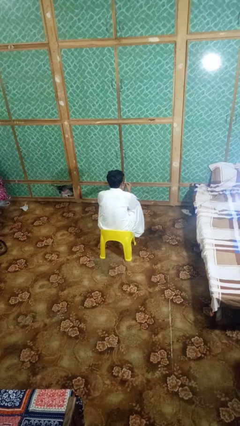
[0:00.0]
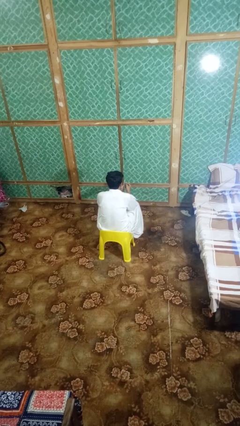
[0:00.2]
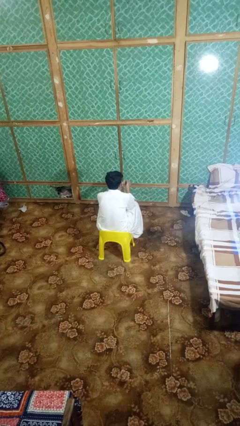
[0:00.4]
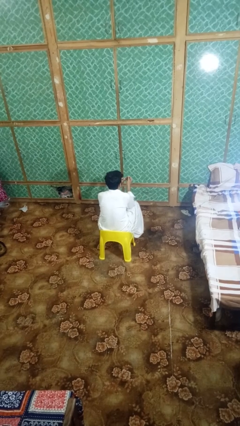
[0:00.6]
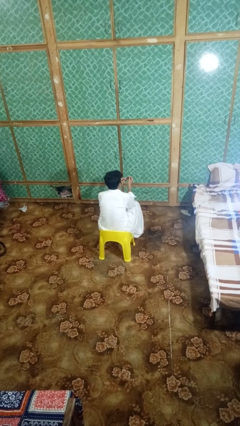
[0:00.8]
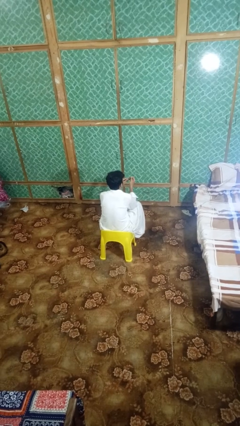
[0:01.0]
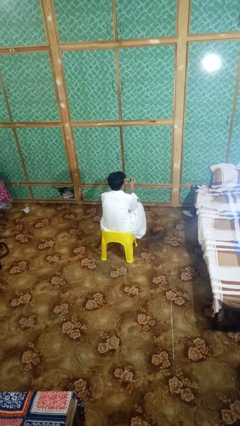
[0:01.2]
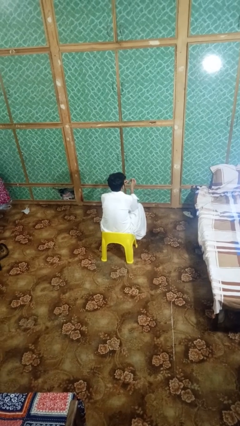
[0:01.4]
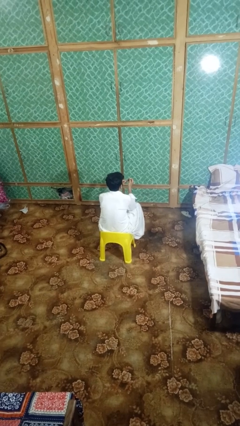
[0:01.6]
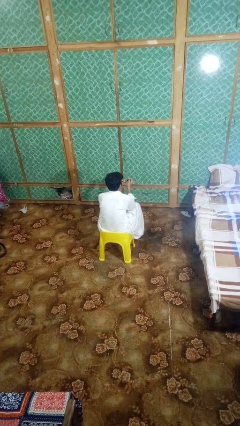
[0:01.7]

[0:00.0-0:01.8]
person files fingernails

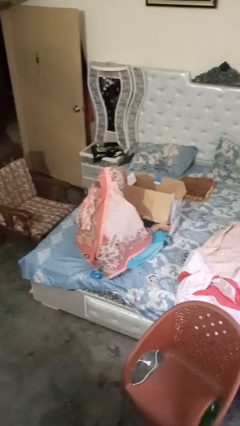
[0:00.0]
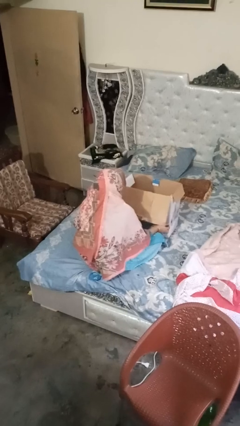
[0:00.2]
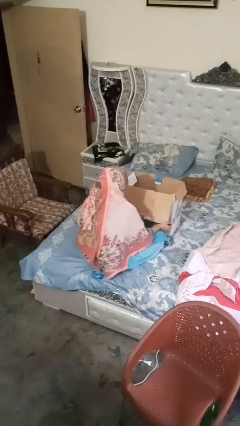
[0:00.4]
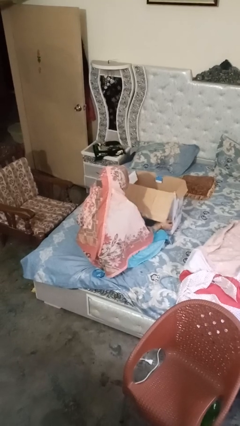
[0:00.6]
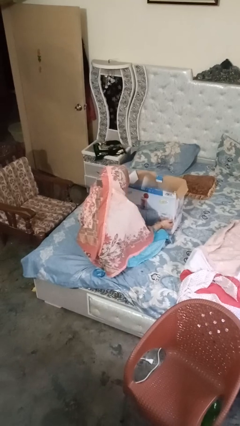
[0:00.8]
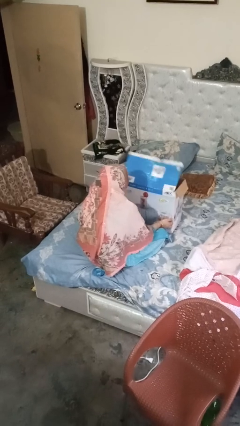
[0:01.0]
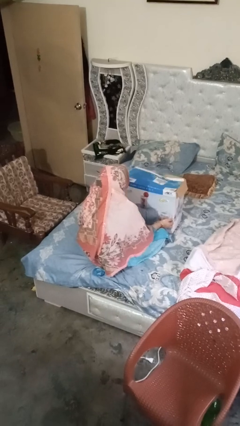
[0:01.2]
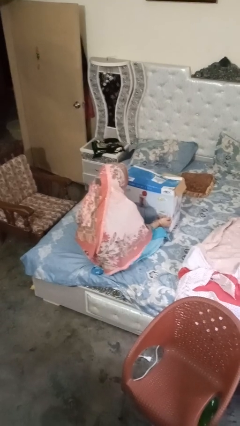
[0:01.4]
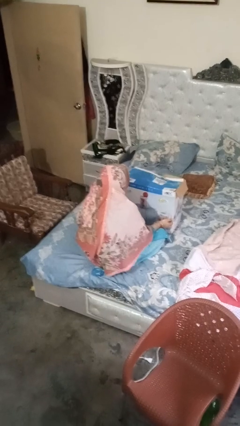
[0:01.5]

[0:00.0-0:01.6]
person closes box

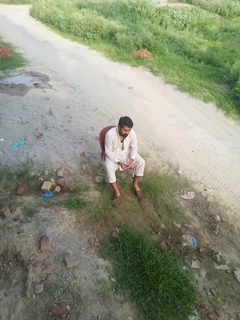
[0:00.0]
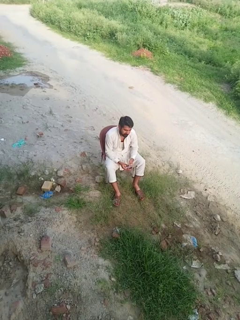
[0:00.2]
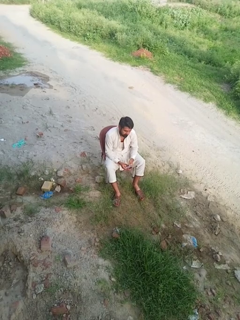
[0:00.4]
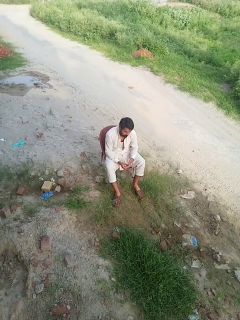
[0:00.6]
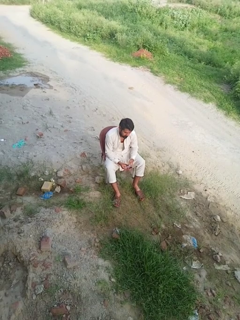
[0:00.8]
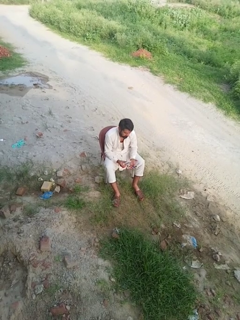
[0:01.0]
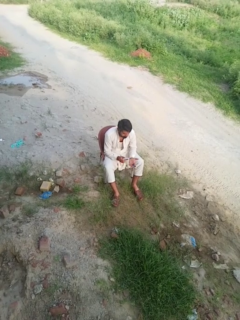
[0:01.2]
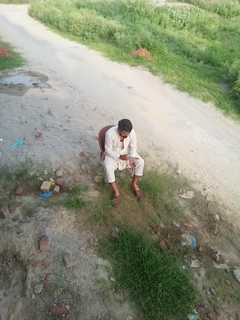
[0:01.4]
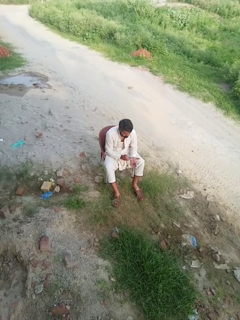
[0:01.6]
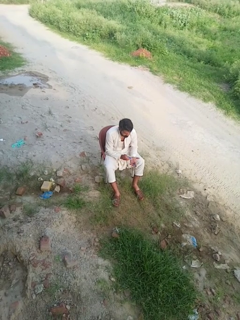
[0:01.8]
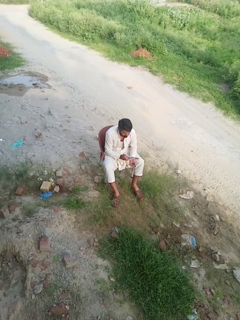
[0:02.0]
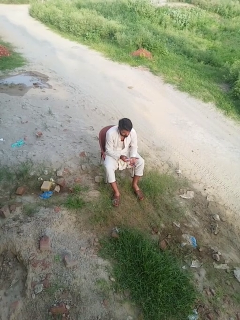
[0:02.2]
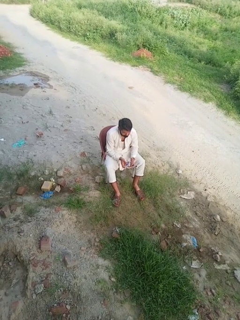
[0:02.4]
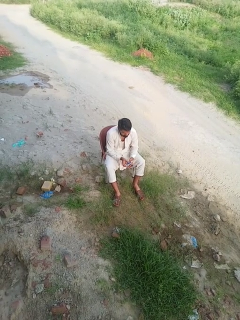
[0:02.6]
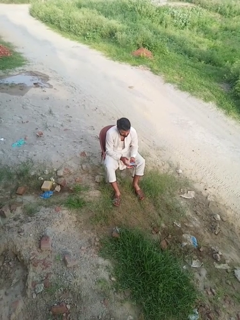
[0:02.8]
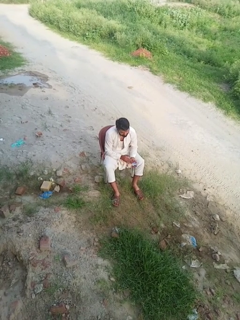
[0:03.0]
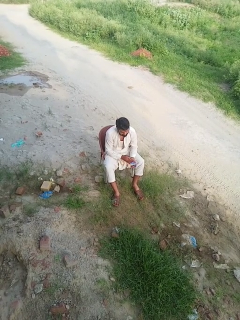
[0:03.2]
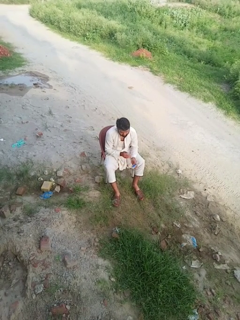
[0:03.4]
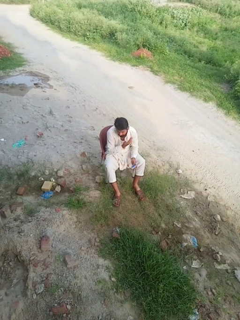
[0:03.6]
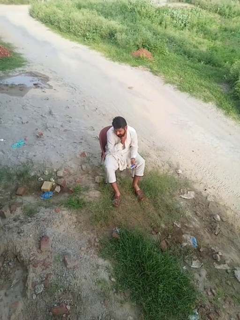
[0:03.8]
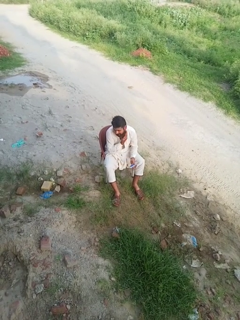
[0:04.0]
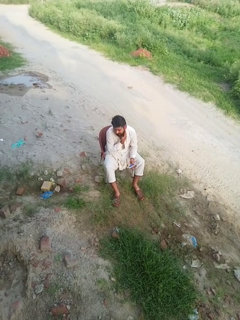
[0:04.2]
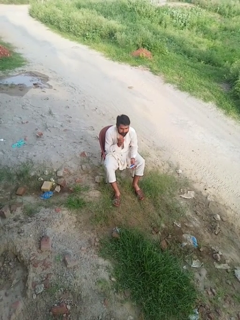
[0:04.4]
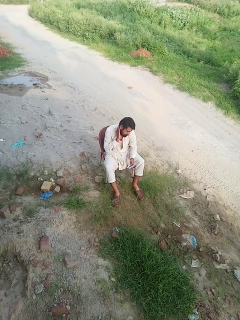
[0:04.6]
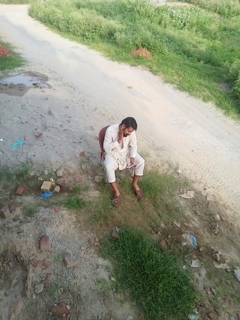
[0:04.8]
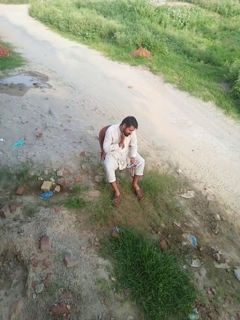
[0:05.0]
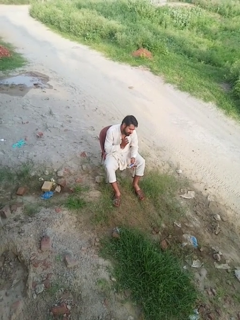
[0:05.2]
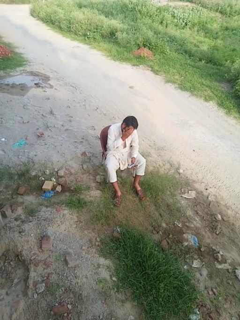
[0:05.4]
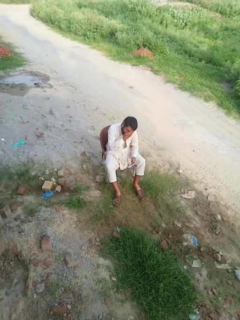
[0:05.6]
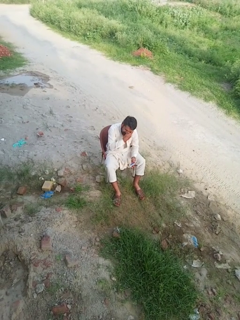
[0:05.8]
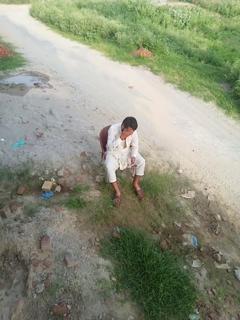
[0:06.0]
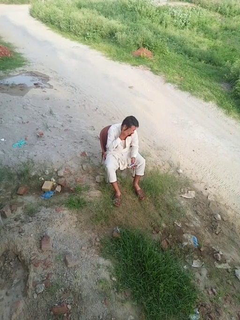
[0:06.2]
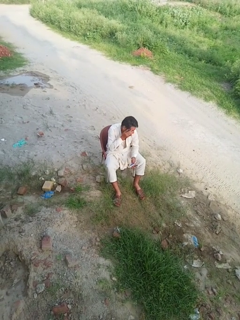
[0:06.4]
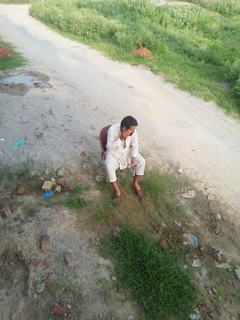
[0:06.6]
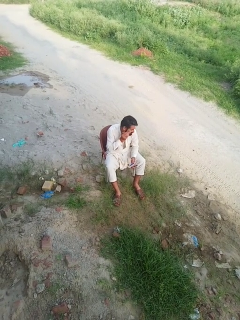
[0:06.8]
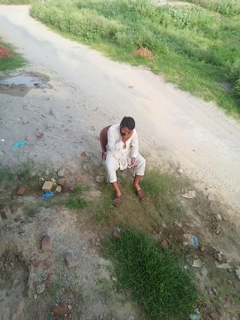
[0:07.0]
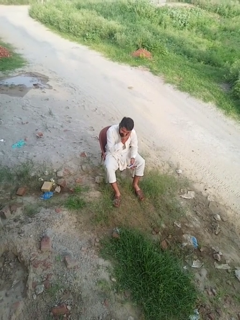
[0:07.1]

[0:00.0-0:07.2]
person applies facial moisturizer

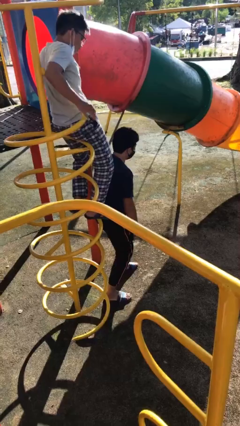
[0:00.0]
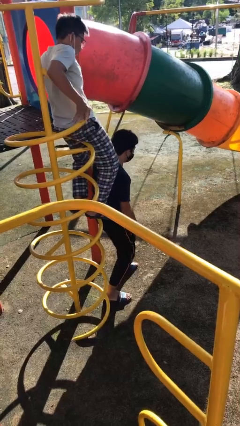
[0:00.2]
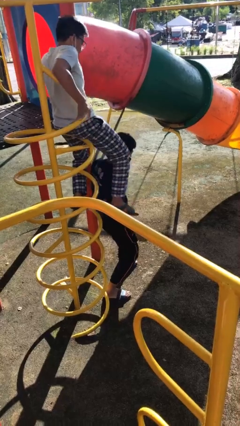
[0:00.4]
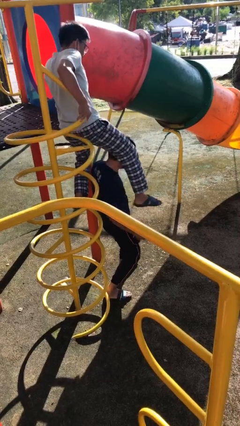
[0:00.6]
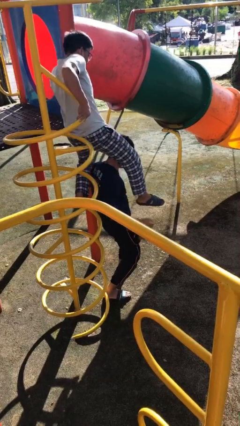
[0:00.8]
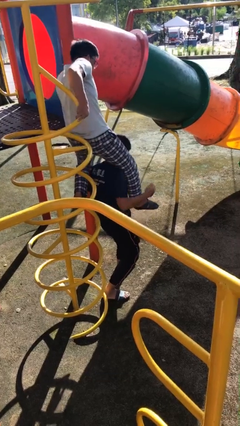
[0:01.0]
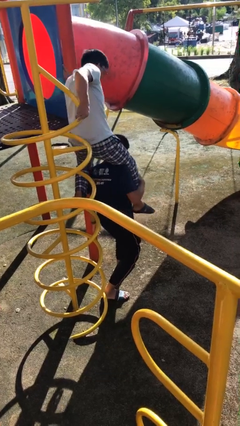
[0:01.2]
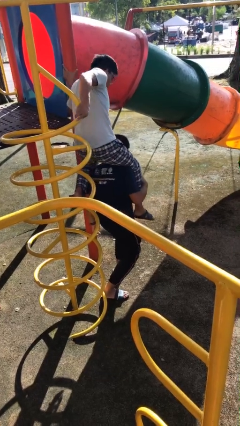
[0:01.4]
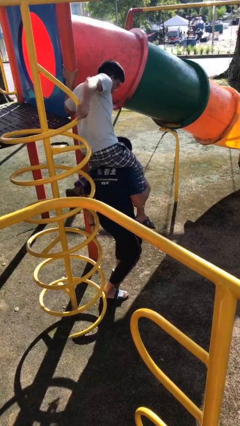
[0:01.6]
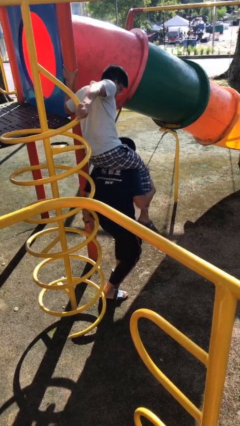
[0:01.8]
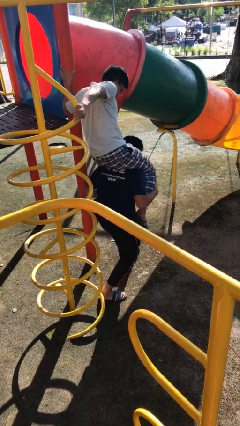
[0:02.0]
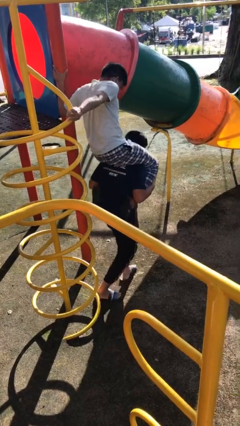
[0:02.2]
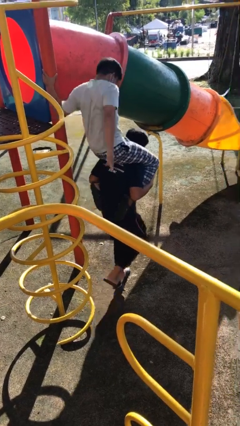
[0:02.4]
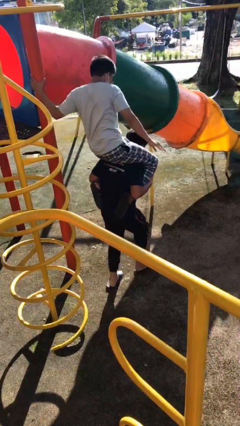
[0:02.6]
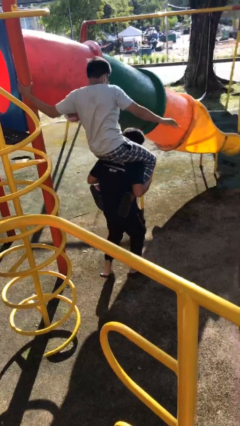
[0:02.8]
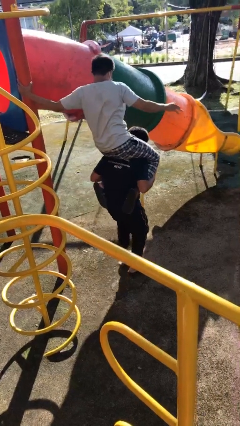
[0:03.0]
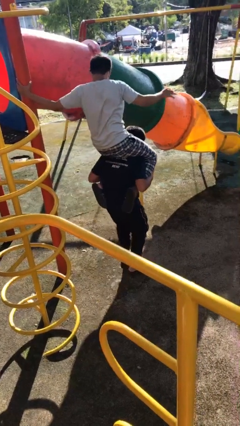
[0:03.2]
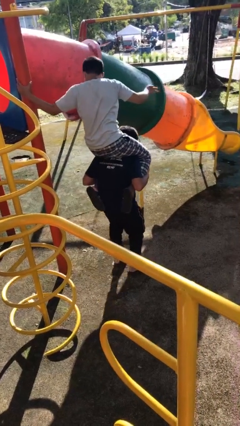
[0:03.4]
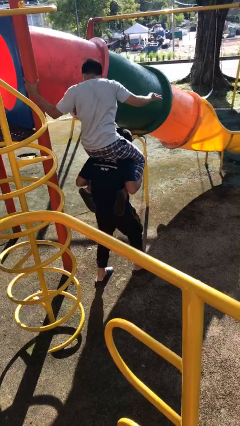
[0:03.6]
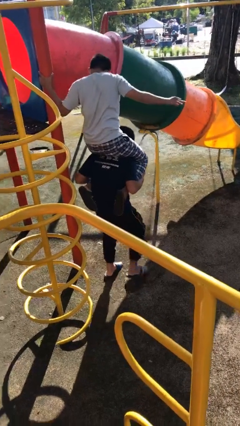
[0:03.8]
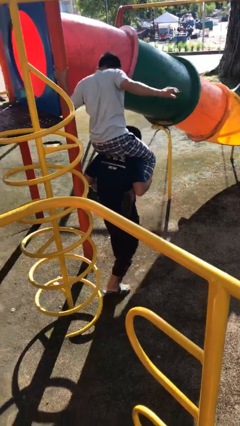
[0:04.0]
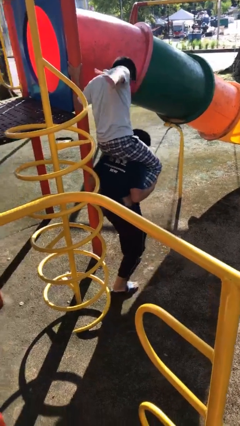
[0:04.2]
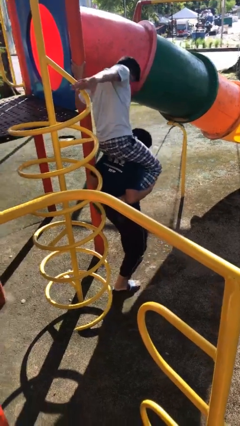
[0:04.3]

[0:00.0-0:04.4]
person carries person on shoulders

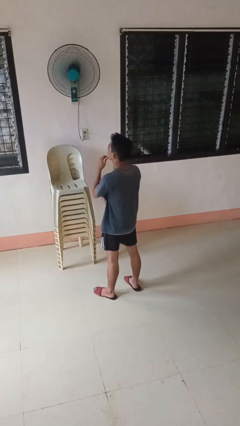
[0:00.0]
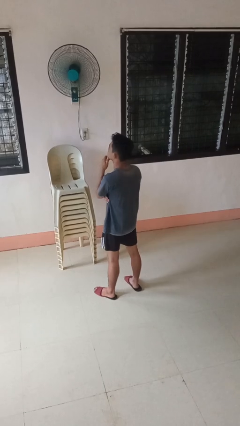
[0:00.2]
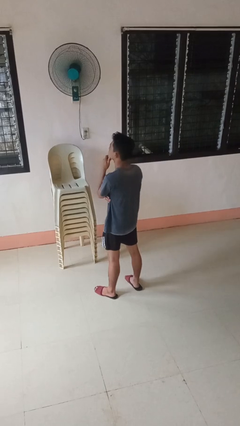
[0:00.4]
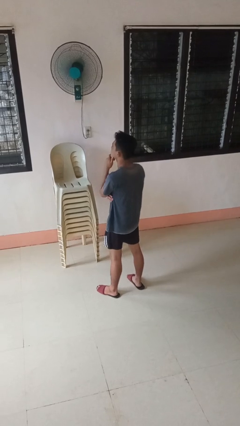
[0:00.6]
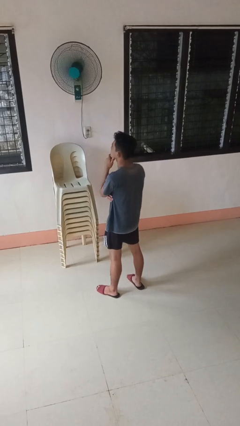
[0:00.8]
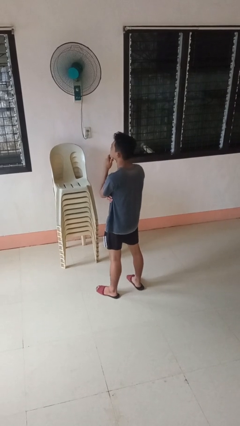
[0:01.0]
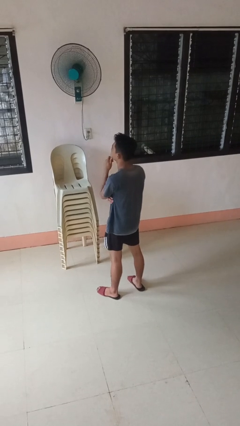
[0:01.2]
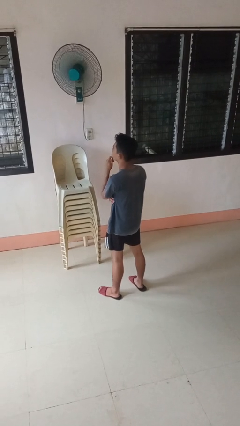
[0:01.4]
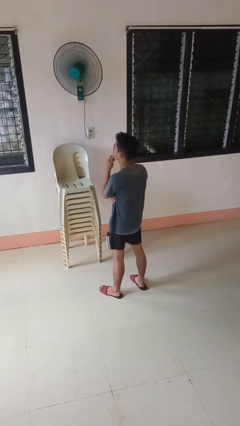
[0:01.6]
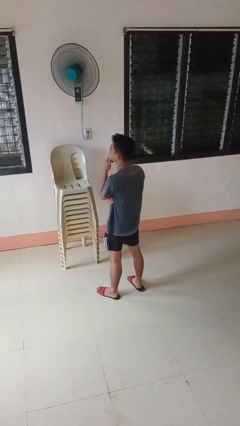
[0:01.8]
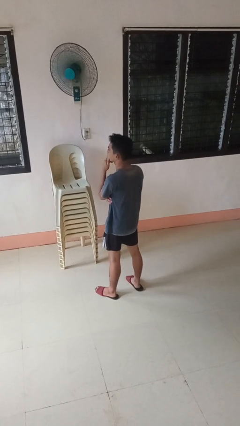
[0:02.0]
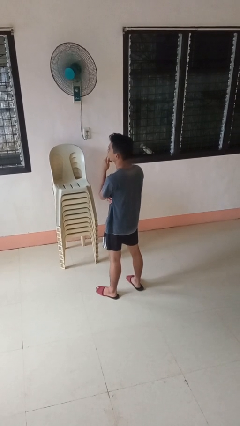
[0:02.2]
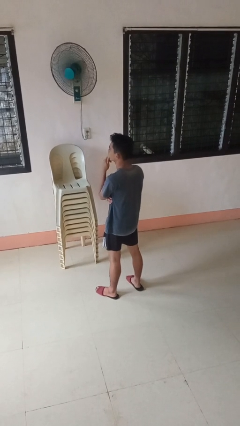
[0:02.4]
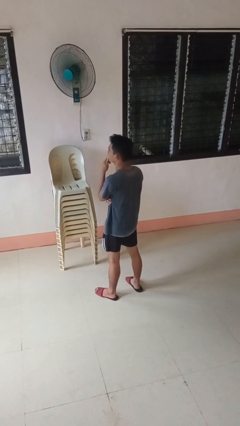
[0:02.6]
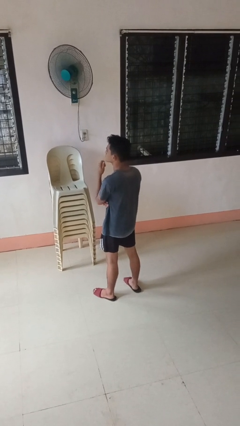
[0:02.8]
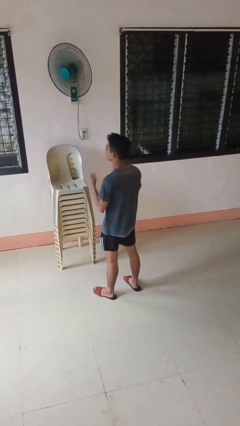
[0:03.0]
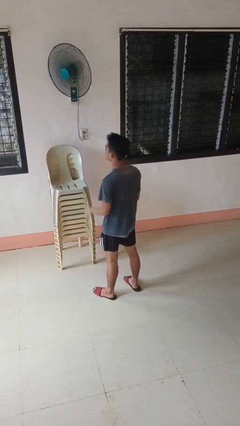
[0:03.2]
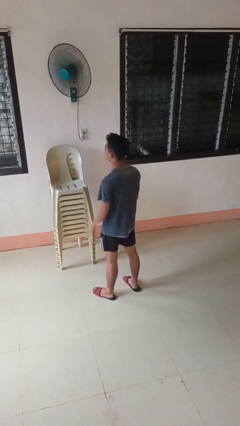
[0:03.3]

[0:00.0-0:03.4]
person strokes chin

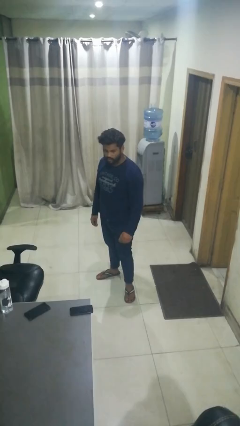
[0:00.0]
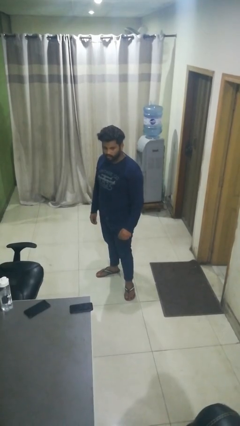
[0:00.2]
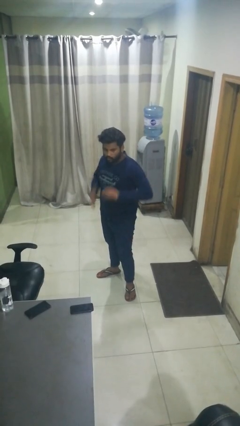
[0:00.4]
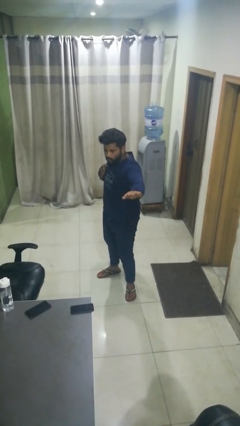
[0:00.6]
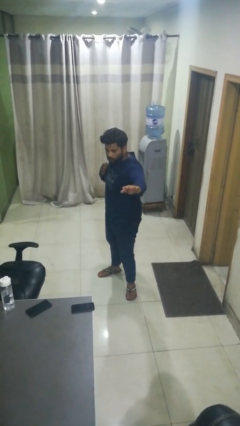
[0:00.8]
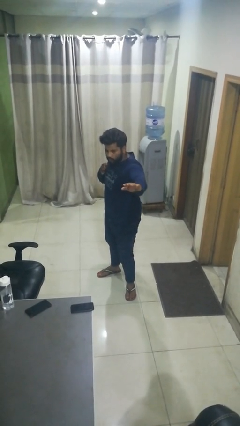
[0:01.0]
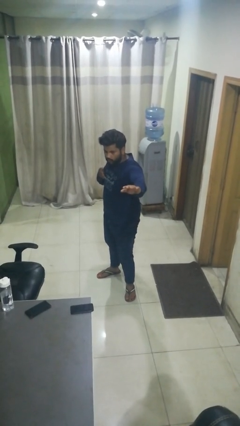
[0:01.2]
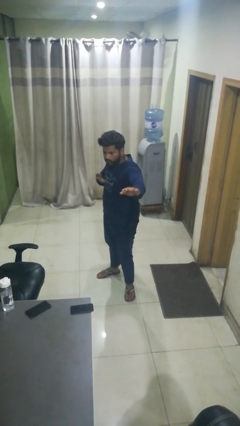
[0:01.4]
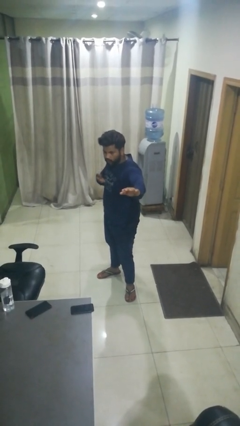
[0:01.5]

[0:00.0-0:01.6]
person karate chop
